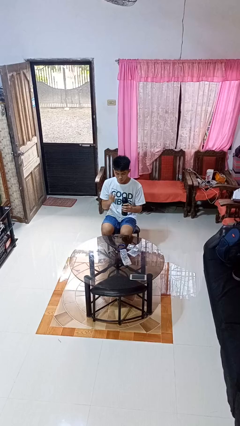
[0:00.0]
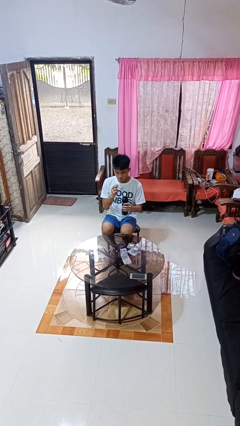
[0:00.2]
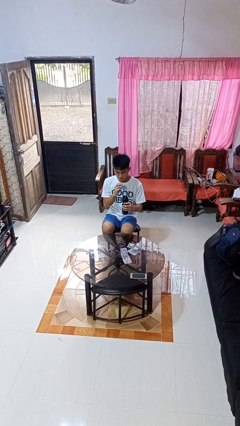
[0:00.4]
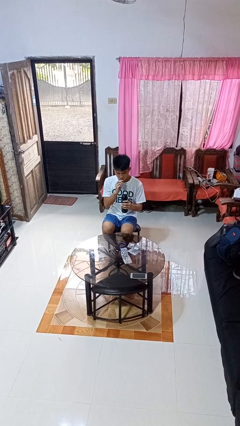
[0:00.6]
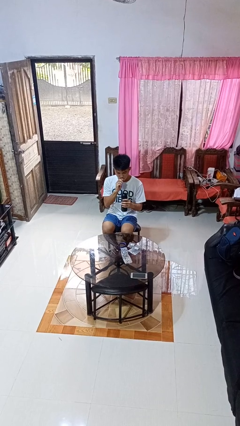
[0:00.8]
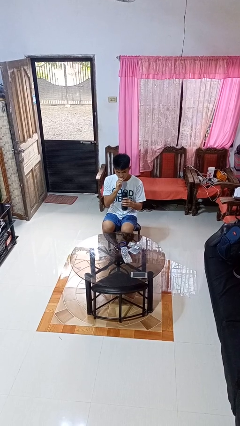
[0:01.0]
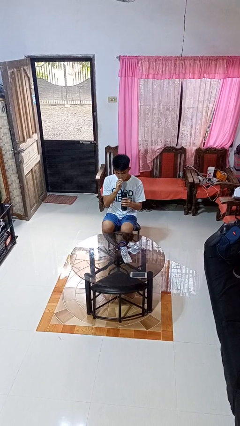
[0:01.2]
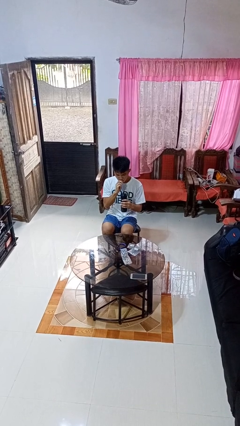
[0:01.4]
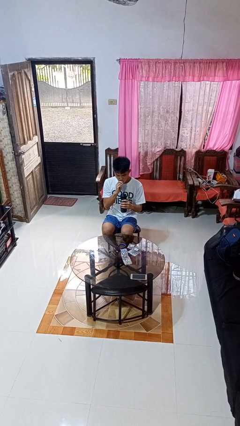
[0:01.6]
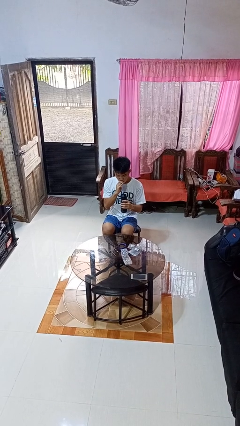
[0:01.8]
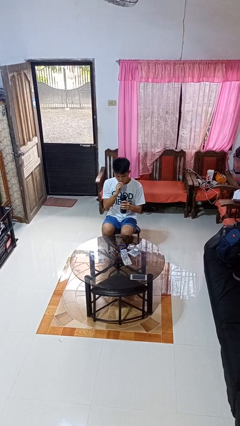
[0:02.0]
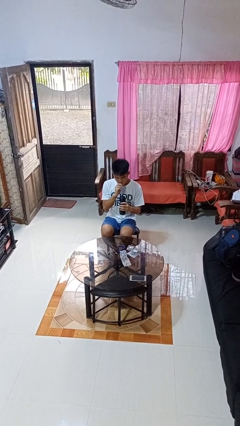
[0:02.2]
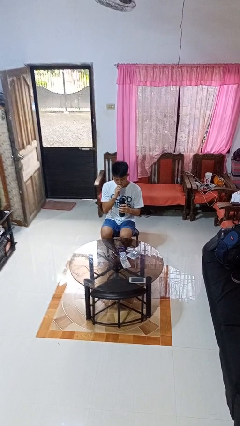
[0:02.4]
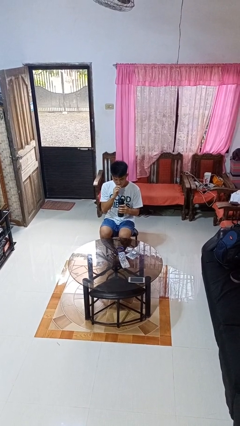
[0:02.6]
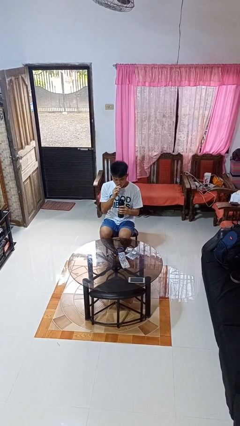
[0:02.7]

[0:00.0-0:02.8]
person drinks from straw

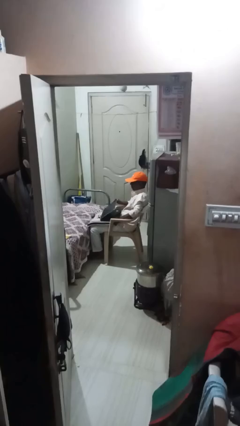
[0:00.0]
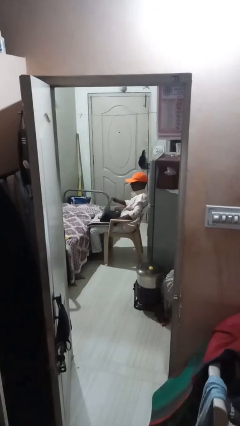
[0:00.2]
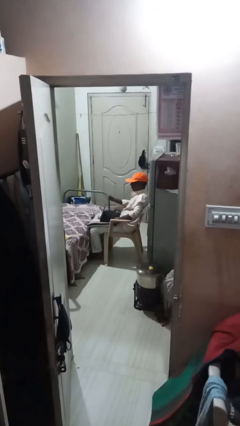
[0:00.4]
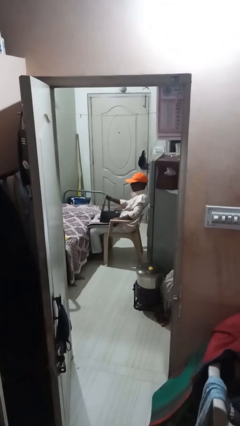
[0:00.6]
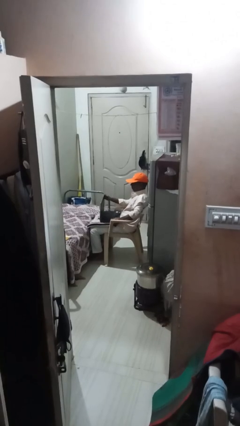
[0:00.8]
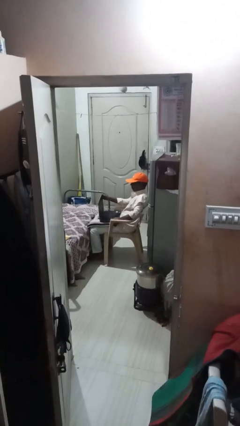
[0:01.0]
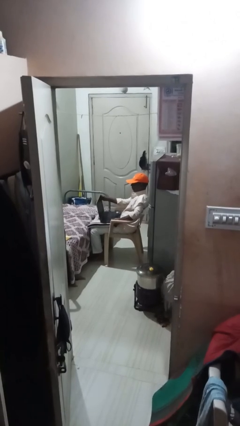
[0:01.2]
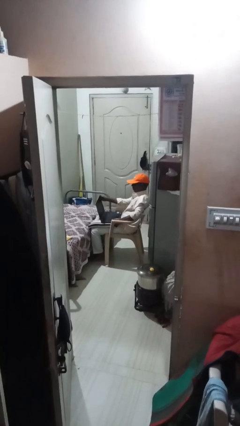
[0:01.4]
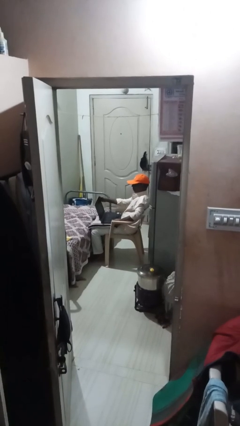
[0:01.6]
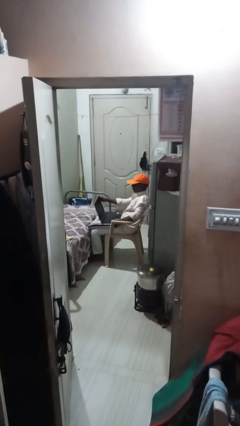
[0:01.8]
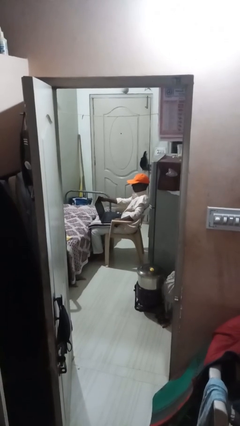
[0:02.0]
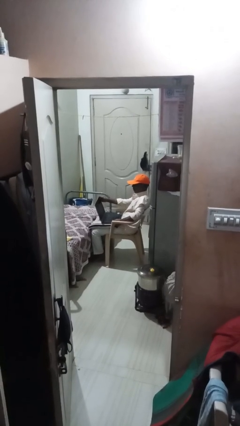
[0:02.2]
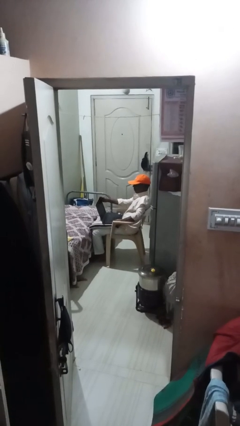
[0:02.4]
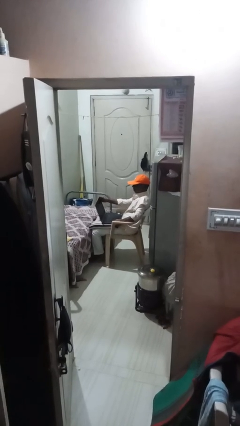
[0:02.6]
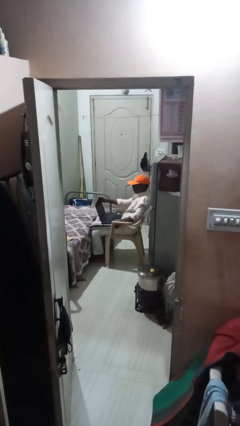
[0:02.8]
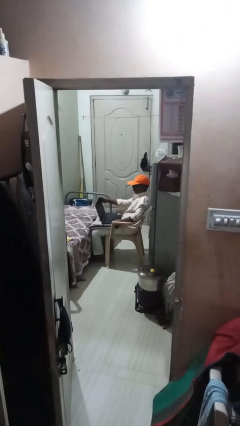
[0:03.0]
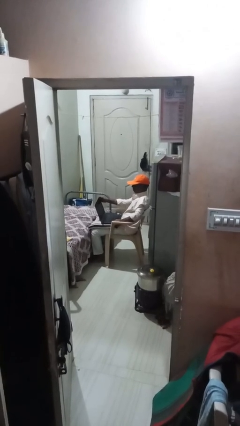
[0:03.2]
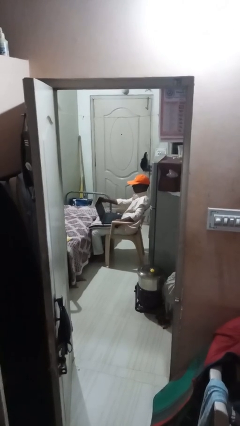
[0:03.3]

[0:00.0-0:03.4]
person interacts with laptop

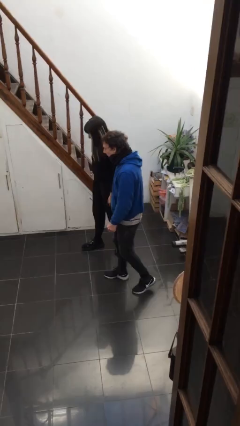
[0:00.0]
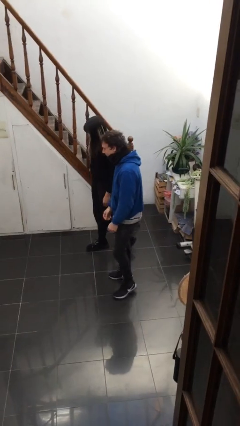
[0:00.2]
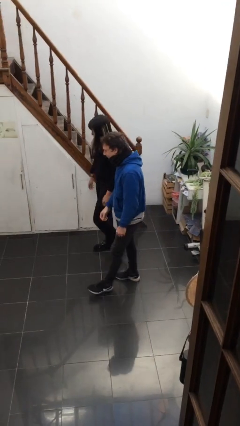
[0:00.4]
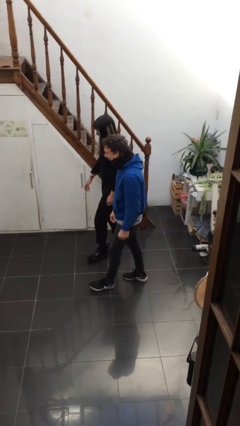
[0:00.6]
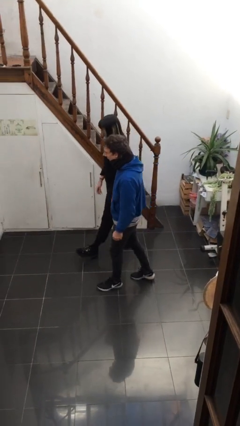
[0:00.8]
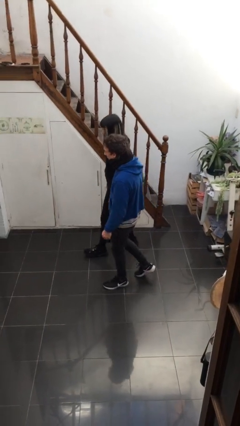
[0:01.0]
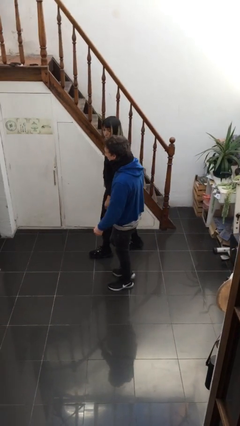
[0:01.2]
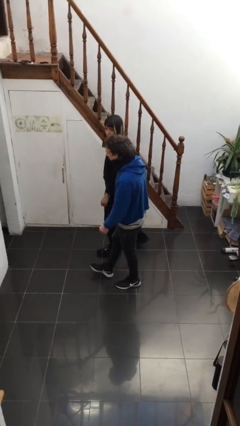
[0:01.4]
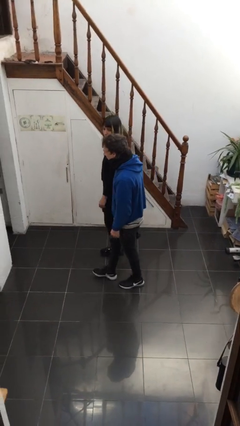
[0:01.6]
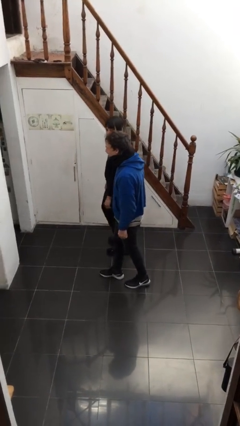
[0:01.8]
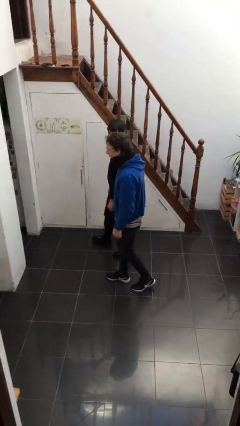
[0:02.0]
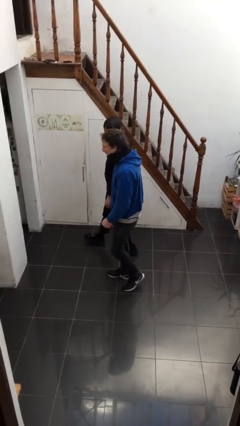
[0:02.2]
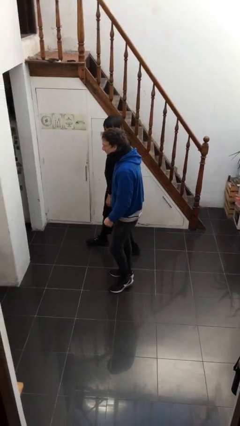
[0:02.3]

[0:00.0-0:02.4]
person talks to person

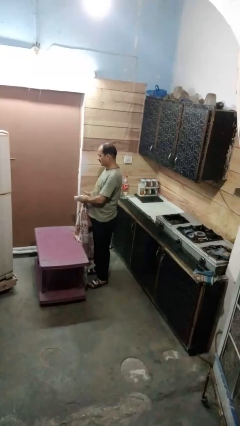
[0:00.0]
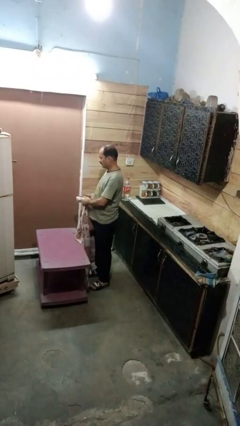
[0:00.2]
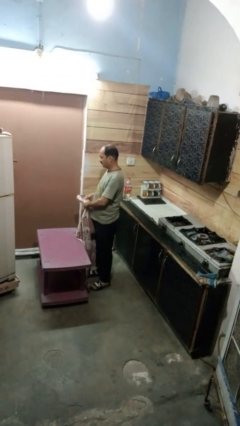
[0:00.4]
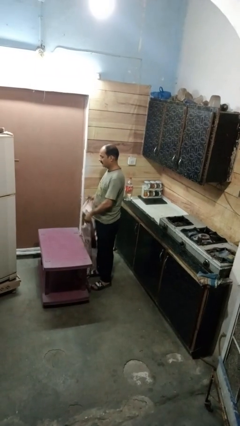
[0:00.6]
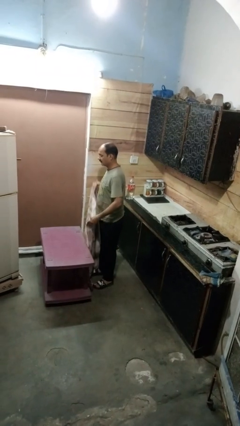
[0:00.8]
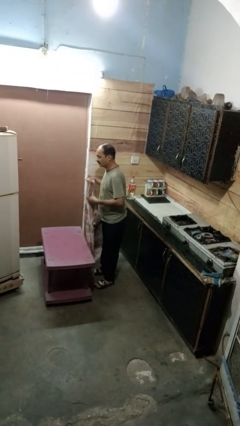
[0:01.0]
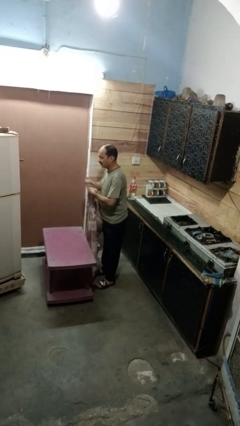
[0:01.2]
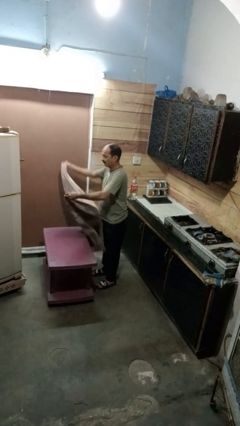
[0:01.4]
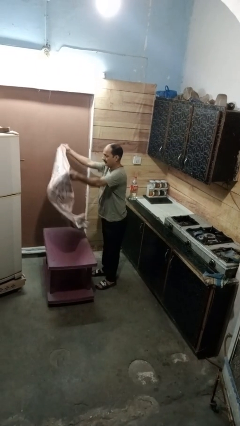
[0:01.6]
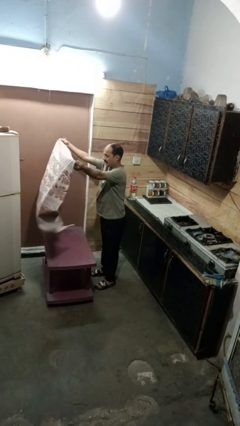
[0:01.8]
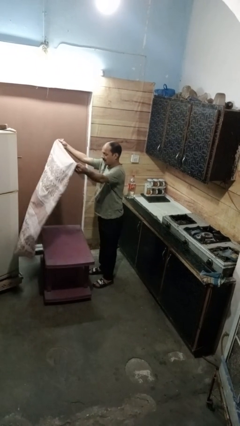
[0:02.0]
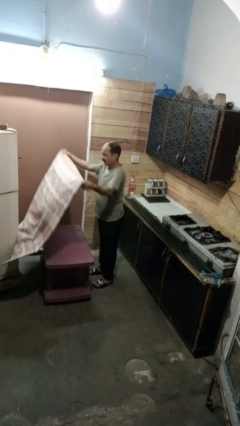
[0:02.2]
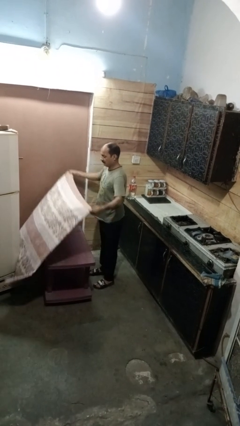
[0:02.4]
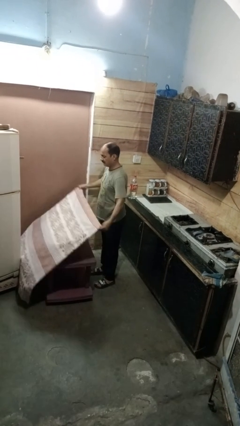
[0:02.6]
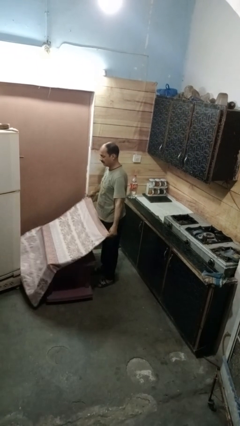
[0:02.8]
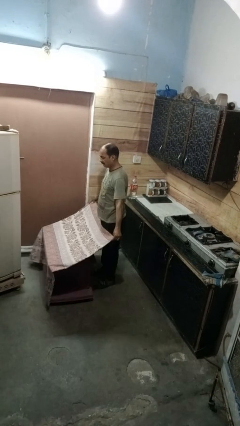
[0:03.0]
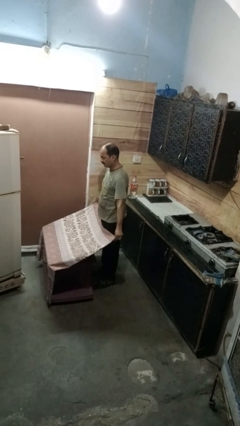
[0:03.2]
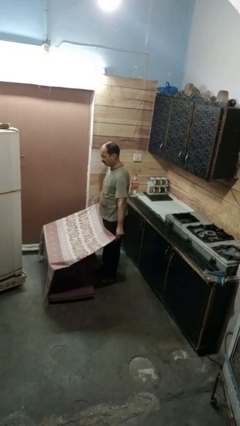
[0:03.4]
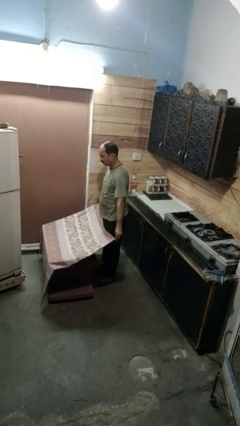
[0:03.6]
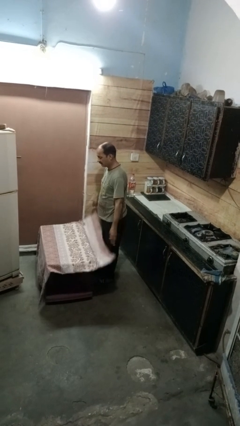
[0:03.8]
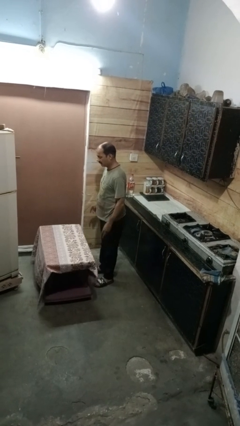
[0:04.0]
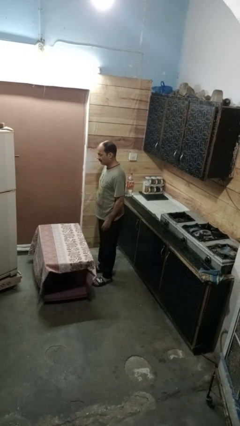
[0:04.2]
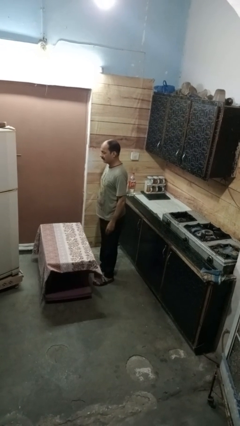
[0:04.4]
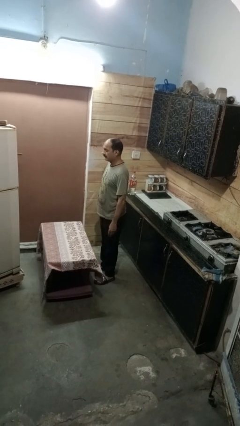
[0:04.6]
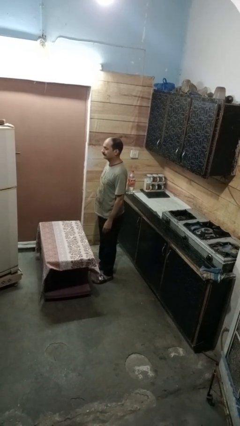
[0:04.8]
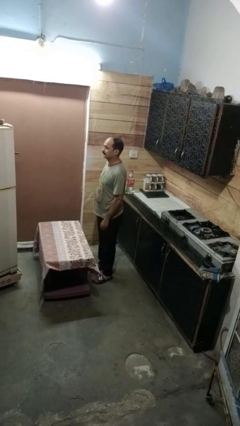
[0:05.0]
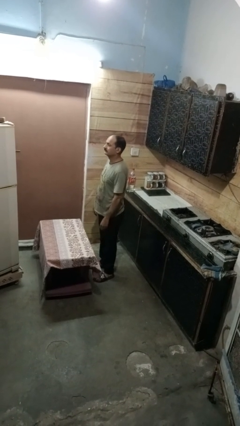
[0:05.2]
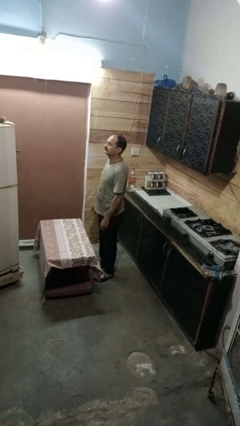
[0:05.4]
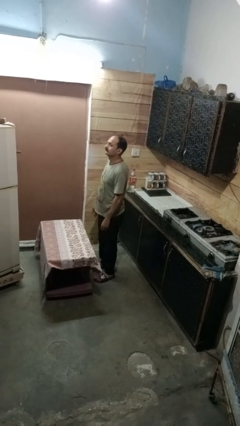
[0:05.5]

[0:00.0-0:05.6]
person spreads tablecloth

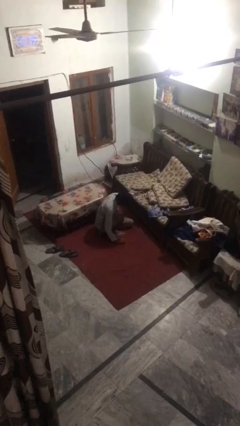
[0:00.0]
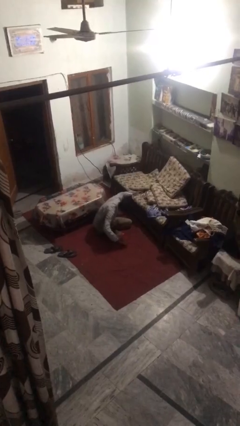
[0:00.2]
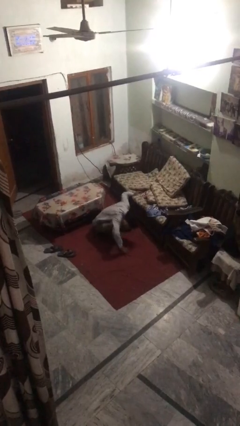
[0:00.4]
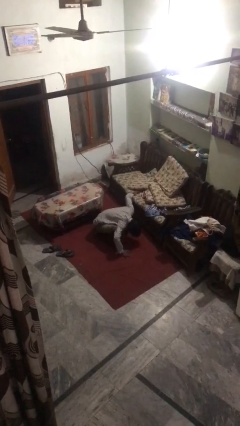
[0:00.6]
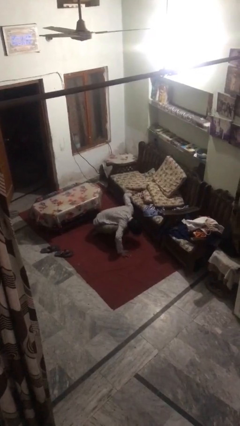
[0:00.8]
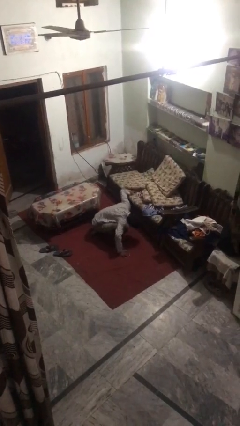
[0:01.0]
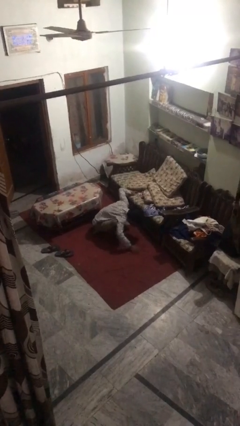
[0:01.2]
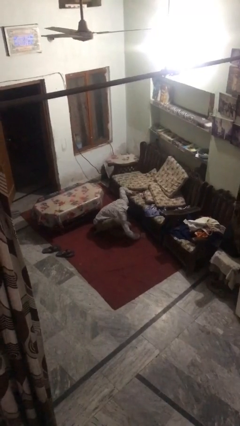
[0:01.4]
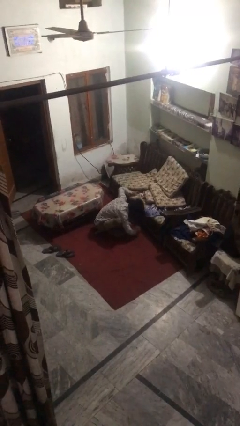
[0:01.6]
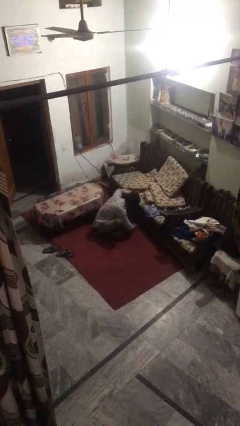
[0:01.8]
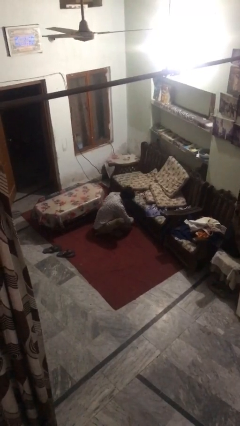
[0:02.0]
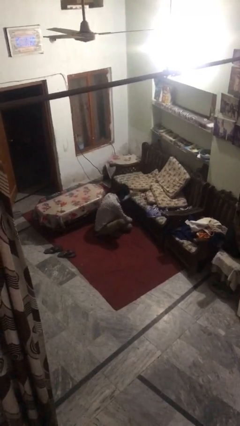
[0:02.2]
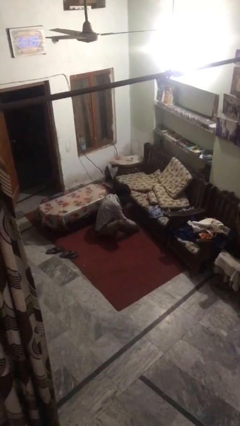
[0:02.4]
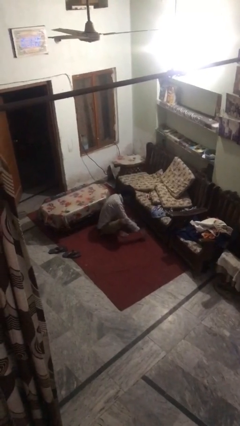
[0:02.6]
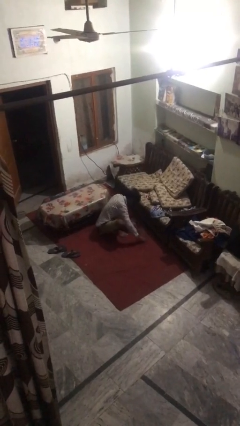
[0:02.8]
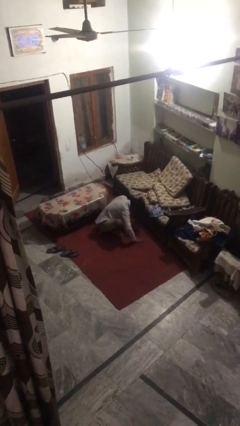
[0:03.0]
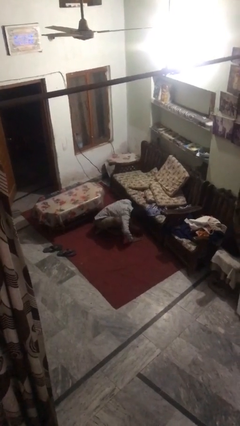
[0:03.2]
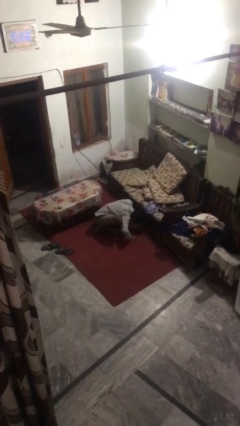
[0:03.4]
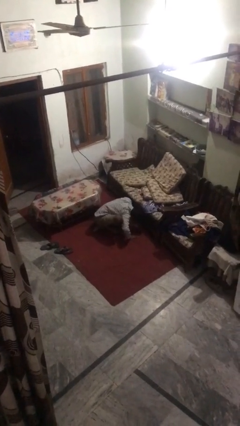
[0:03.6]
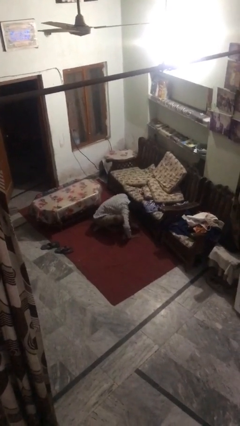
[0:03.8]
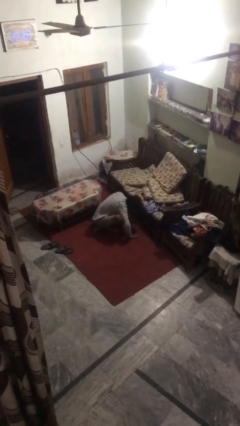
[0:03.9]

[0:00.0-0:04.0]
person searches under couch
